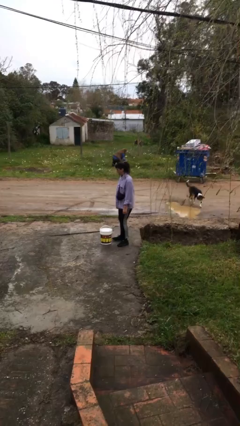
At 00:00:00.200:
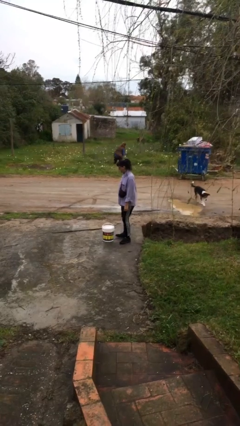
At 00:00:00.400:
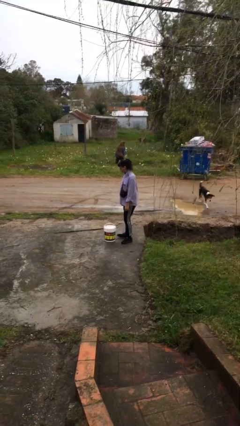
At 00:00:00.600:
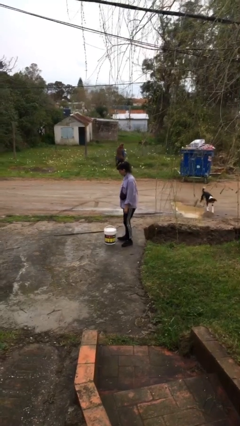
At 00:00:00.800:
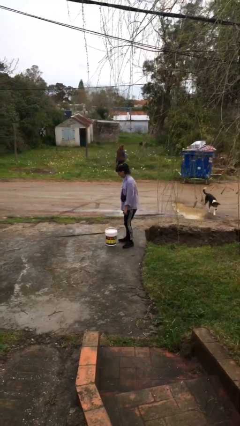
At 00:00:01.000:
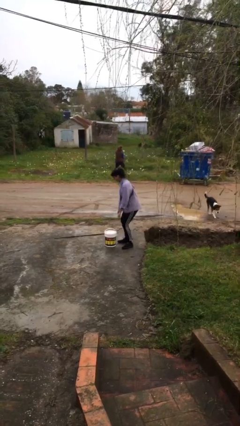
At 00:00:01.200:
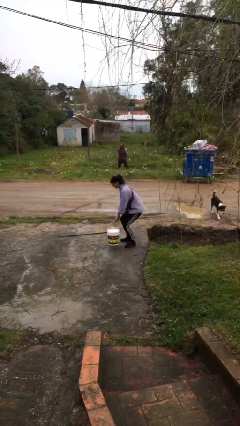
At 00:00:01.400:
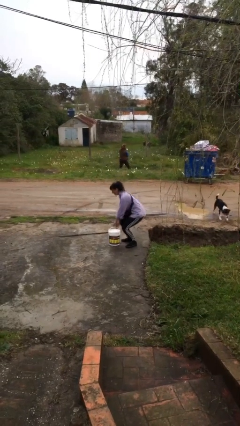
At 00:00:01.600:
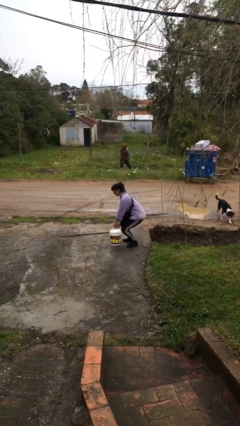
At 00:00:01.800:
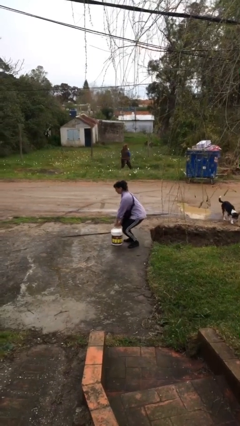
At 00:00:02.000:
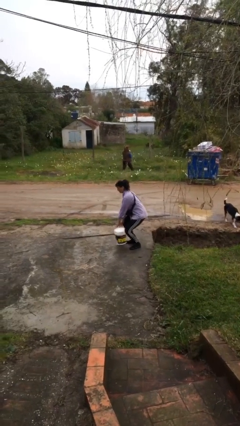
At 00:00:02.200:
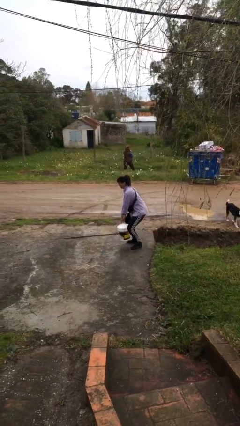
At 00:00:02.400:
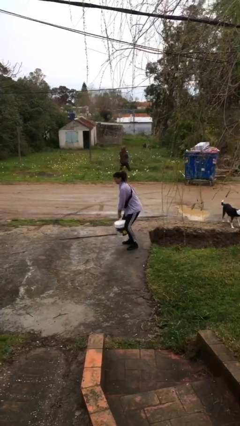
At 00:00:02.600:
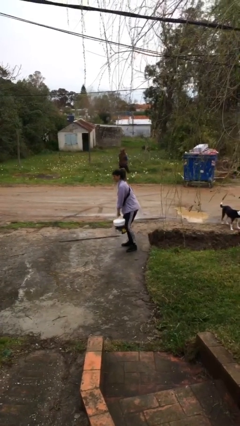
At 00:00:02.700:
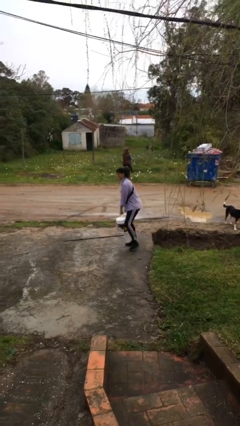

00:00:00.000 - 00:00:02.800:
person picks up object from floor

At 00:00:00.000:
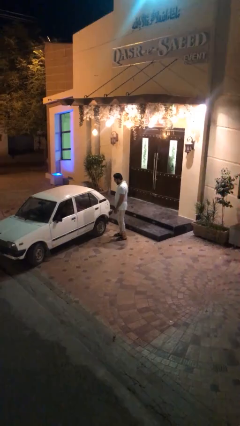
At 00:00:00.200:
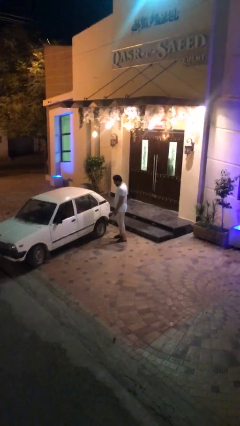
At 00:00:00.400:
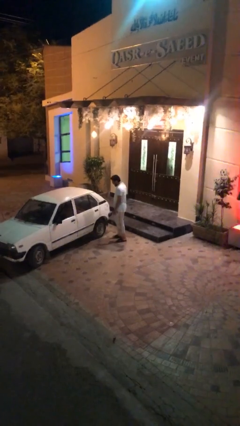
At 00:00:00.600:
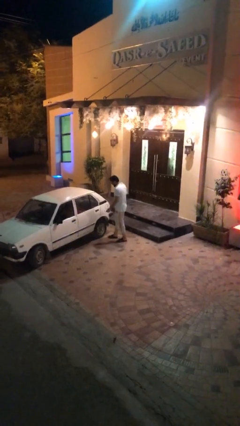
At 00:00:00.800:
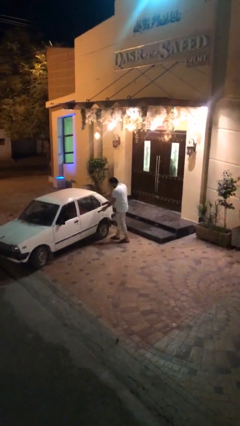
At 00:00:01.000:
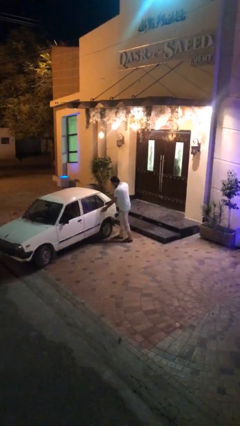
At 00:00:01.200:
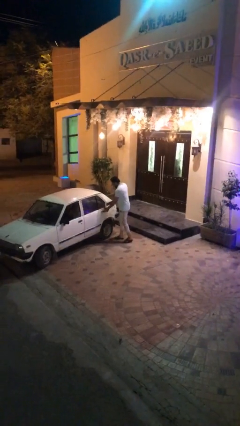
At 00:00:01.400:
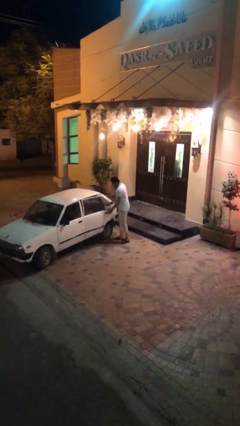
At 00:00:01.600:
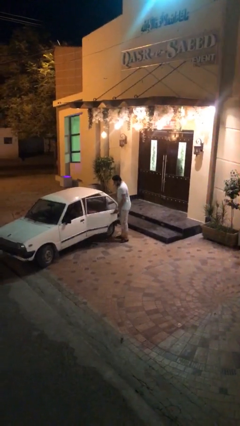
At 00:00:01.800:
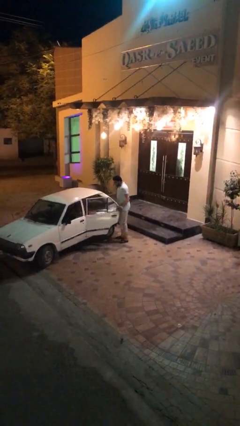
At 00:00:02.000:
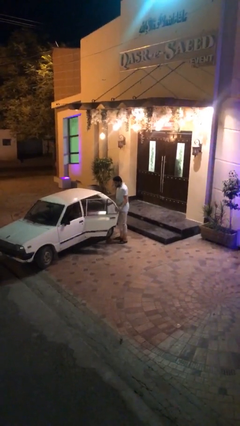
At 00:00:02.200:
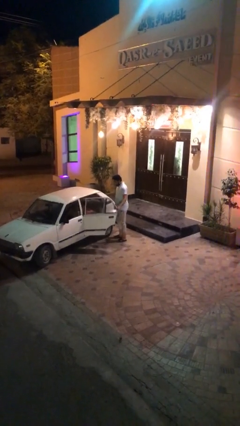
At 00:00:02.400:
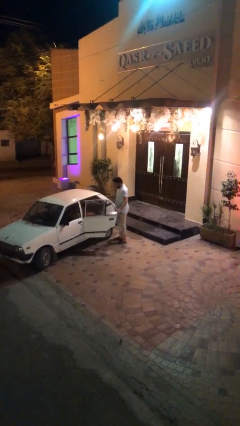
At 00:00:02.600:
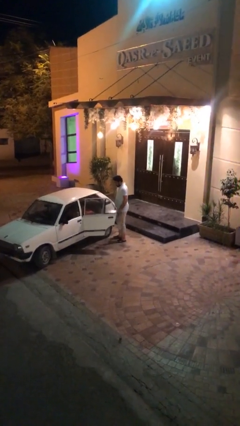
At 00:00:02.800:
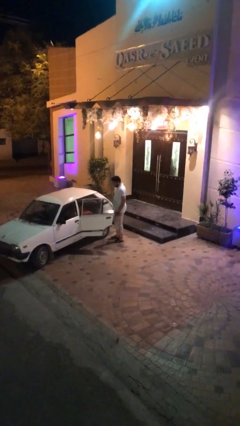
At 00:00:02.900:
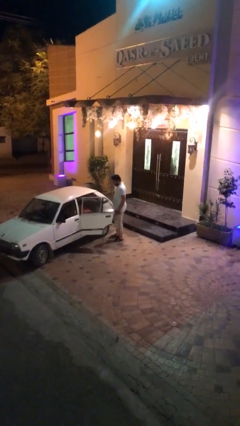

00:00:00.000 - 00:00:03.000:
person opens car door

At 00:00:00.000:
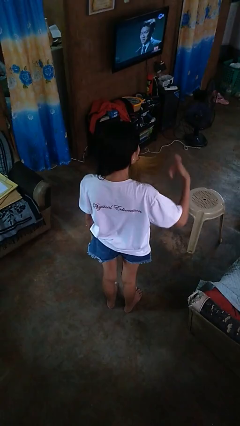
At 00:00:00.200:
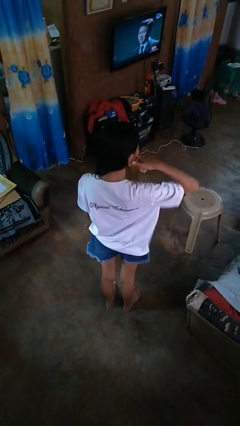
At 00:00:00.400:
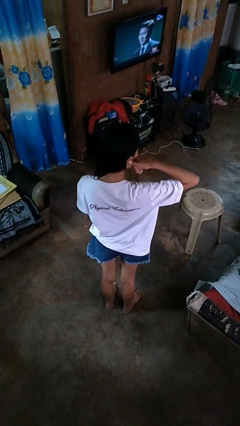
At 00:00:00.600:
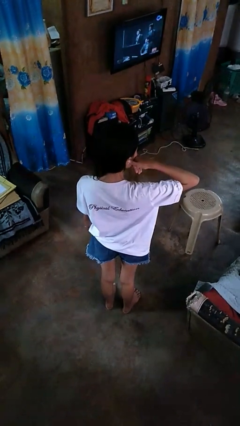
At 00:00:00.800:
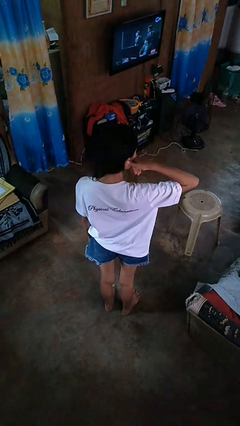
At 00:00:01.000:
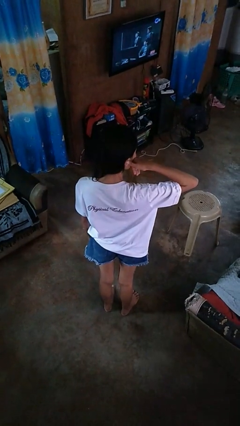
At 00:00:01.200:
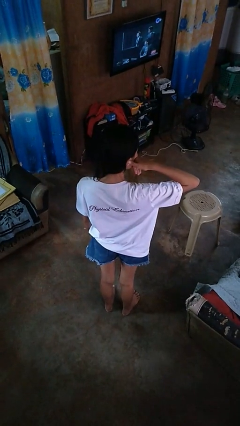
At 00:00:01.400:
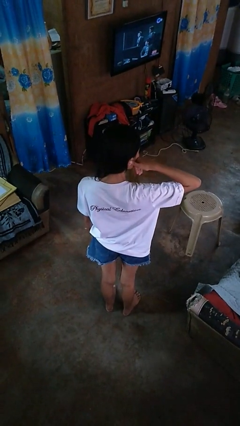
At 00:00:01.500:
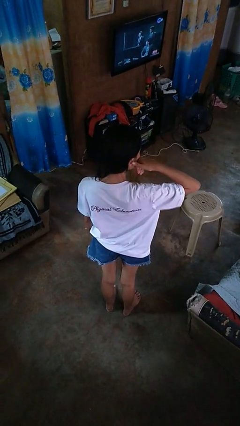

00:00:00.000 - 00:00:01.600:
person gestures call me

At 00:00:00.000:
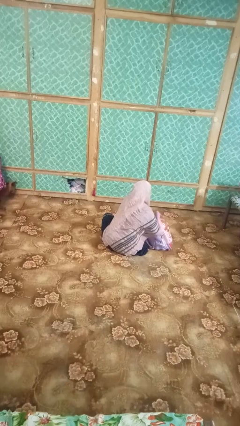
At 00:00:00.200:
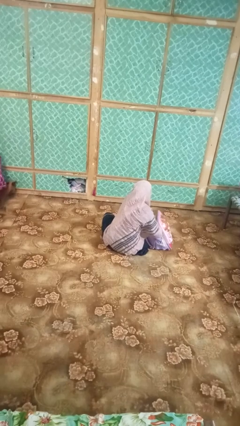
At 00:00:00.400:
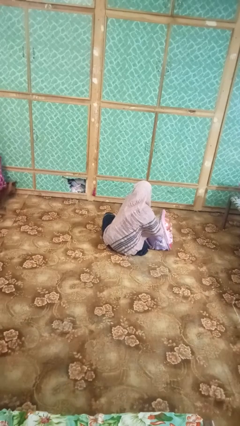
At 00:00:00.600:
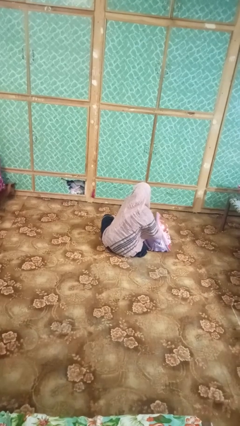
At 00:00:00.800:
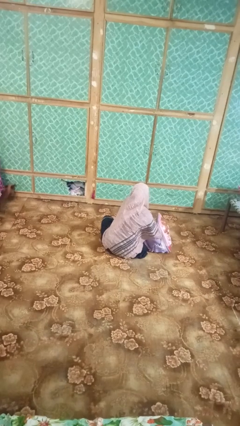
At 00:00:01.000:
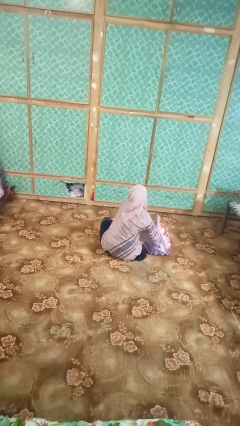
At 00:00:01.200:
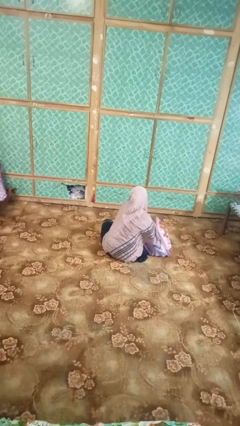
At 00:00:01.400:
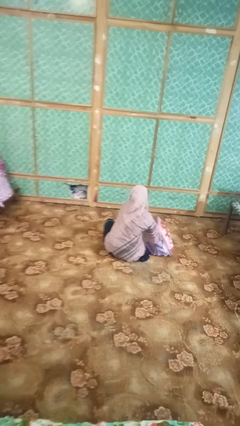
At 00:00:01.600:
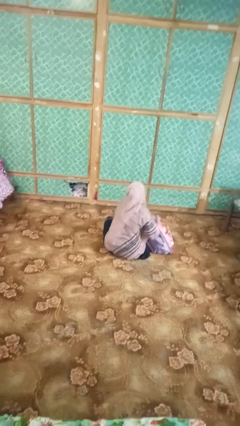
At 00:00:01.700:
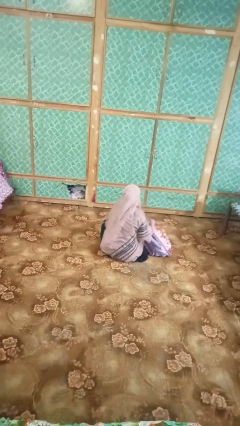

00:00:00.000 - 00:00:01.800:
person searches in bag

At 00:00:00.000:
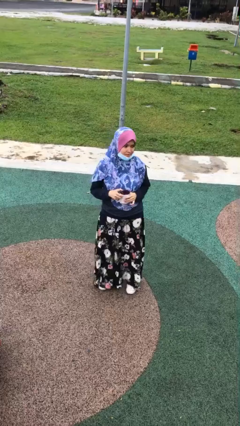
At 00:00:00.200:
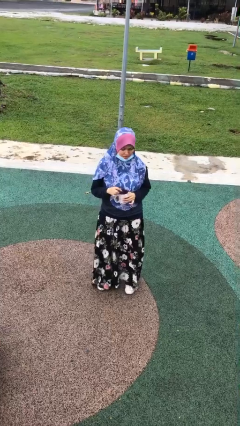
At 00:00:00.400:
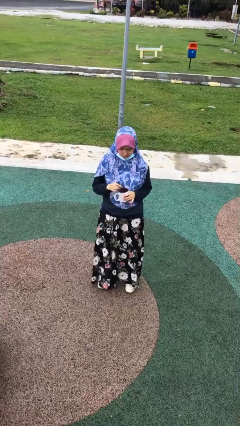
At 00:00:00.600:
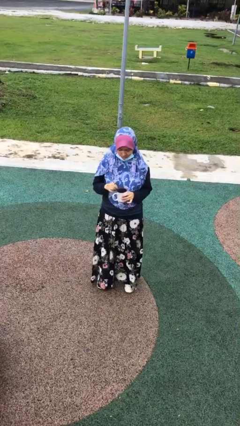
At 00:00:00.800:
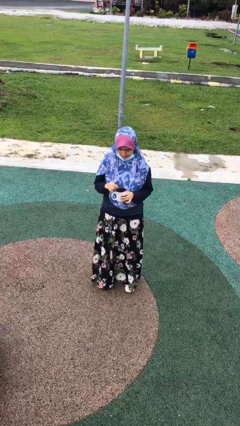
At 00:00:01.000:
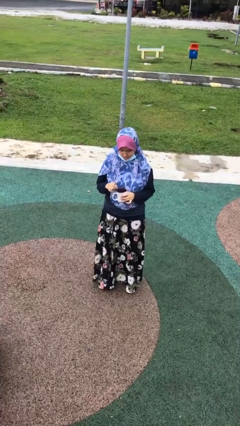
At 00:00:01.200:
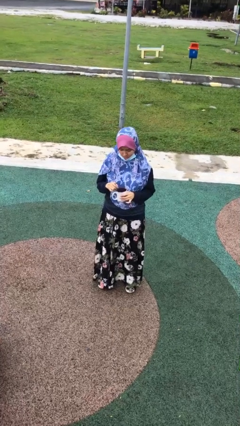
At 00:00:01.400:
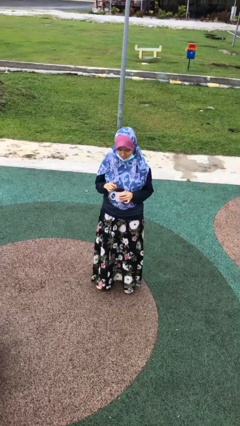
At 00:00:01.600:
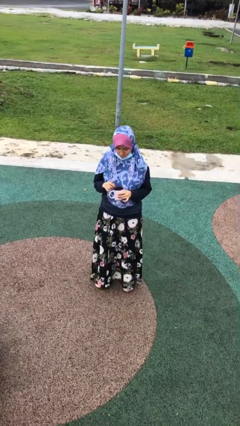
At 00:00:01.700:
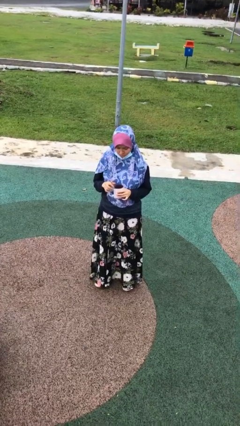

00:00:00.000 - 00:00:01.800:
person stirs mug

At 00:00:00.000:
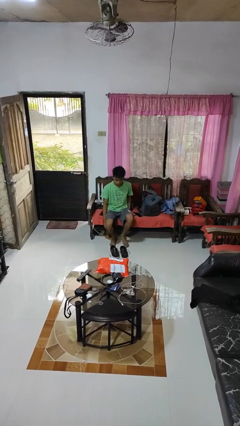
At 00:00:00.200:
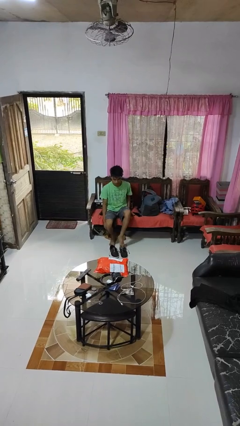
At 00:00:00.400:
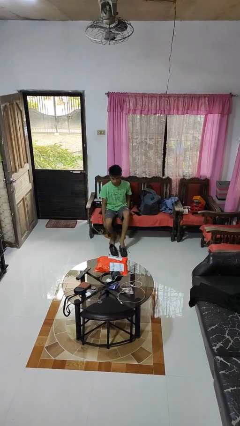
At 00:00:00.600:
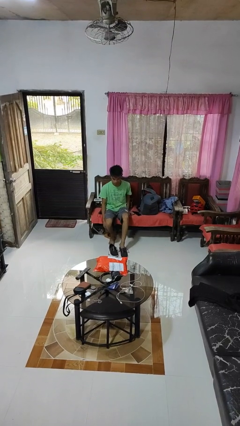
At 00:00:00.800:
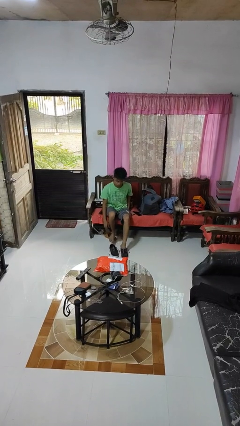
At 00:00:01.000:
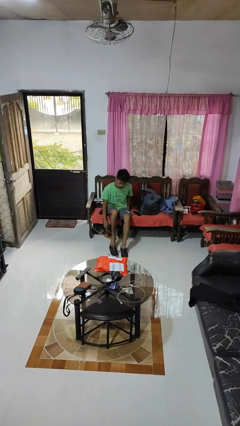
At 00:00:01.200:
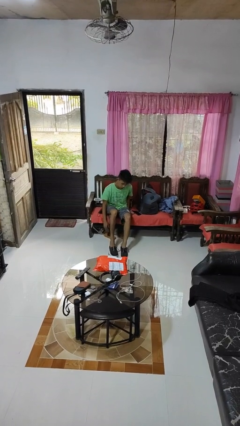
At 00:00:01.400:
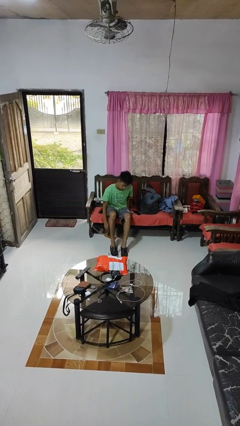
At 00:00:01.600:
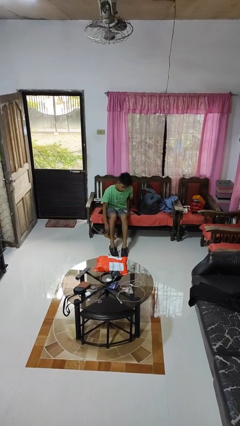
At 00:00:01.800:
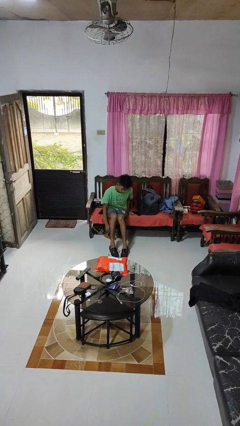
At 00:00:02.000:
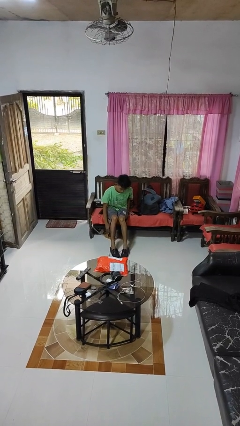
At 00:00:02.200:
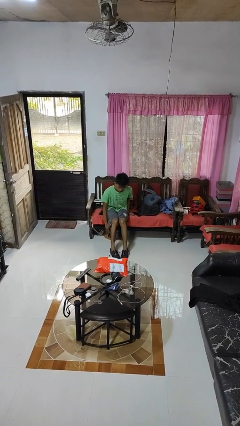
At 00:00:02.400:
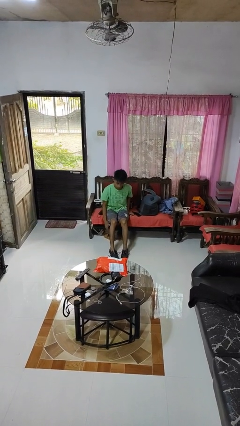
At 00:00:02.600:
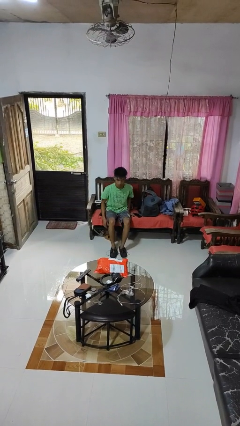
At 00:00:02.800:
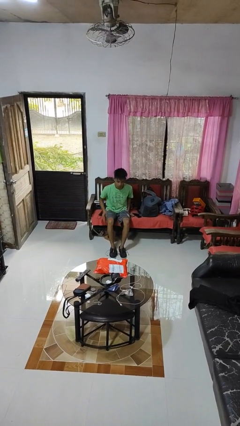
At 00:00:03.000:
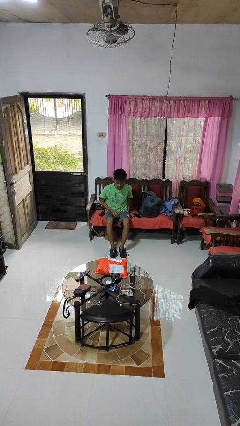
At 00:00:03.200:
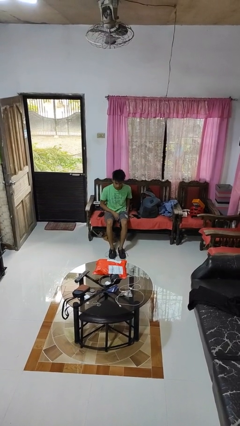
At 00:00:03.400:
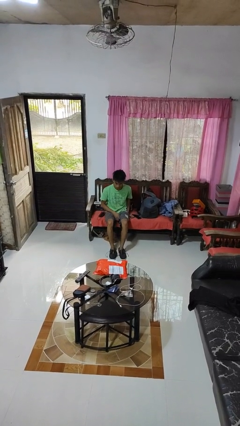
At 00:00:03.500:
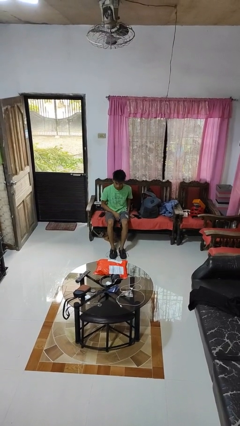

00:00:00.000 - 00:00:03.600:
person puts on shoes

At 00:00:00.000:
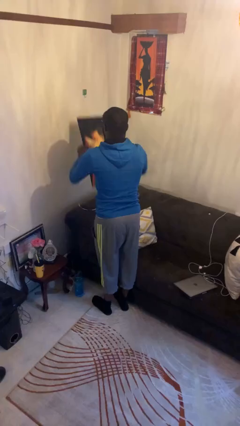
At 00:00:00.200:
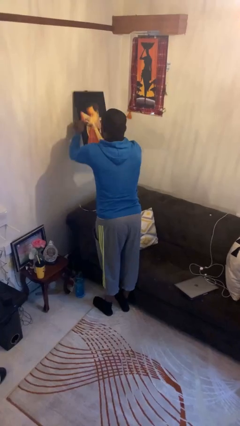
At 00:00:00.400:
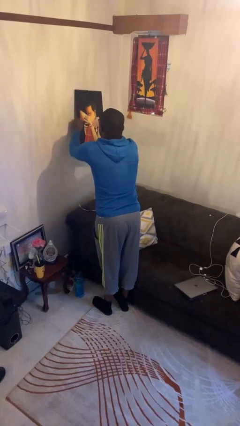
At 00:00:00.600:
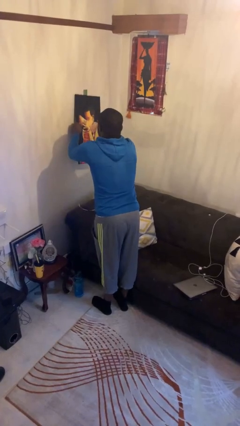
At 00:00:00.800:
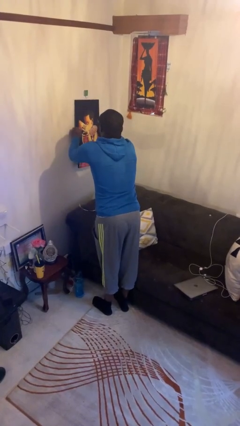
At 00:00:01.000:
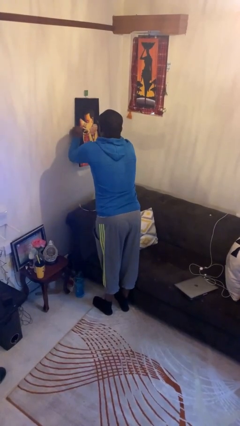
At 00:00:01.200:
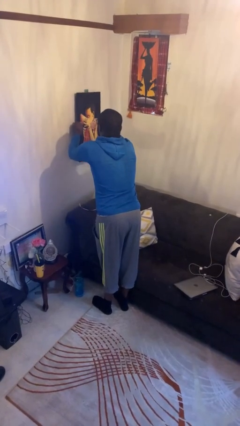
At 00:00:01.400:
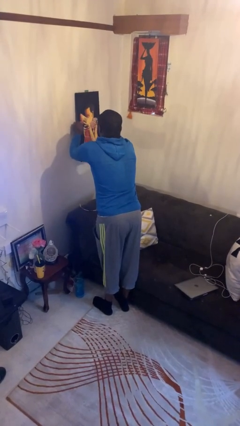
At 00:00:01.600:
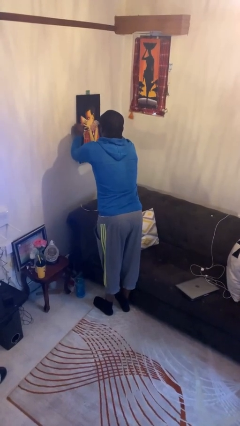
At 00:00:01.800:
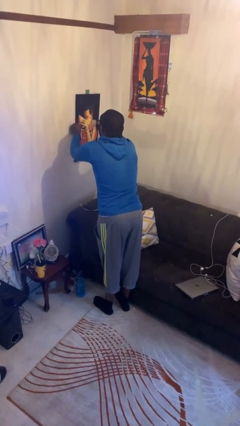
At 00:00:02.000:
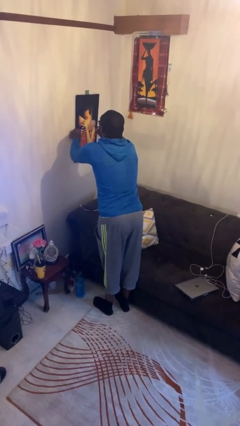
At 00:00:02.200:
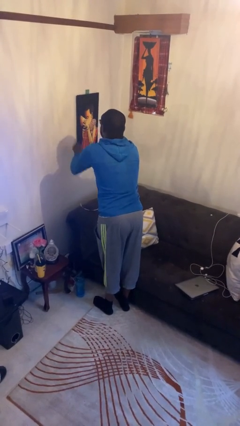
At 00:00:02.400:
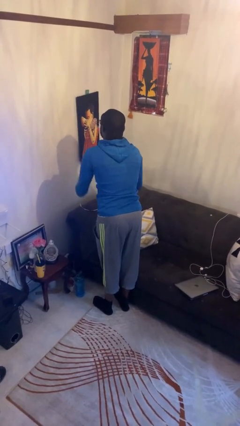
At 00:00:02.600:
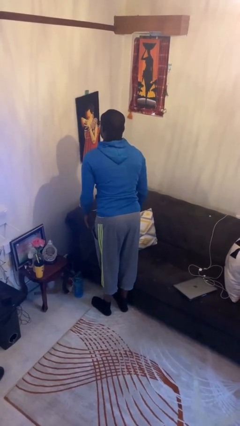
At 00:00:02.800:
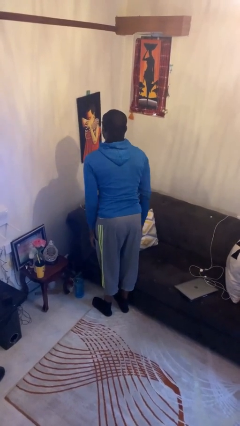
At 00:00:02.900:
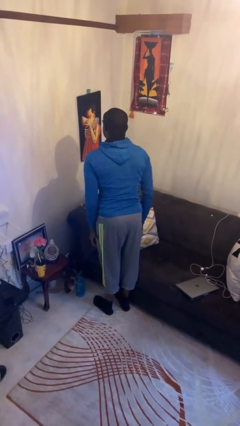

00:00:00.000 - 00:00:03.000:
person puts up picture frame
